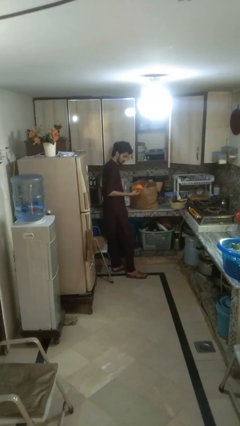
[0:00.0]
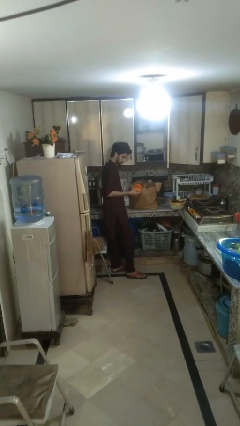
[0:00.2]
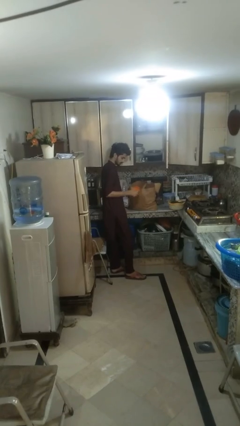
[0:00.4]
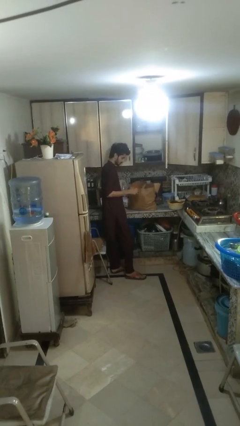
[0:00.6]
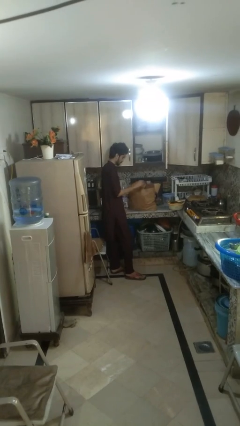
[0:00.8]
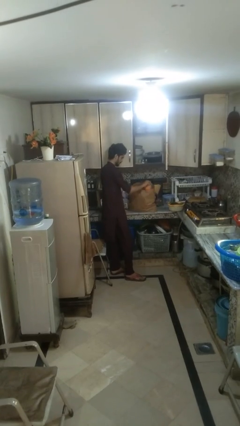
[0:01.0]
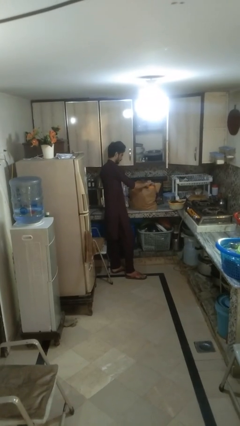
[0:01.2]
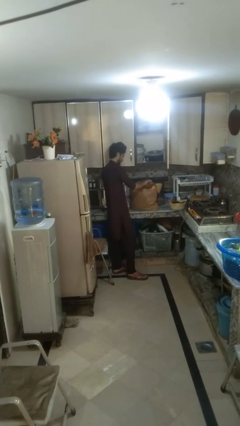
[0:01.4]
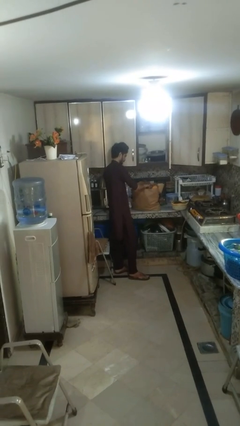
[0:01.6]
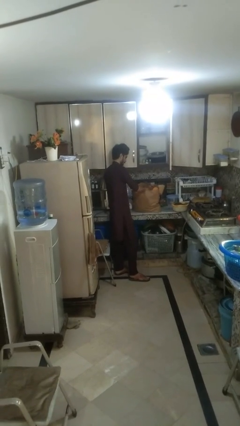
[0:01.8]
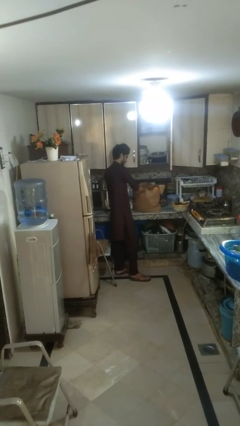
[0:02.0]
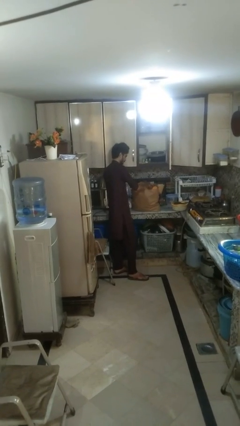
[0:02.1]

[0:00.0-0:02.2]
person puts object into bag

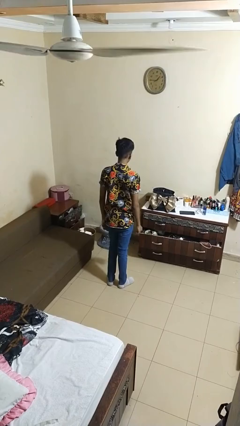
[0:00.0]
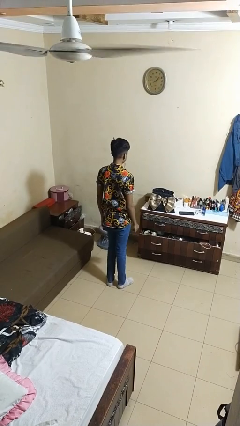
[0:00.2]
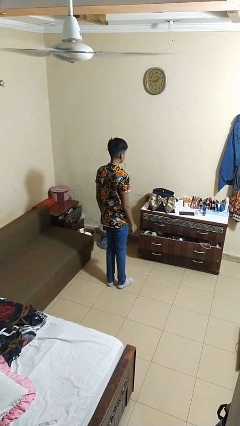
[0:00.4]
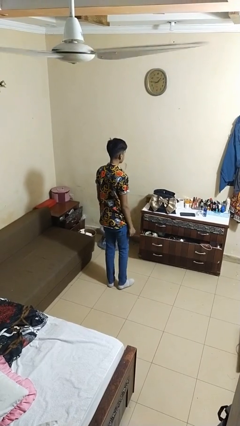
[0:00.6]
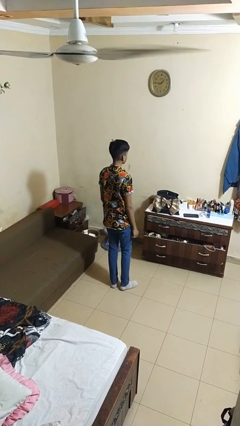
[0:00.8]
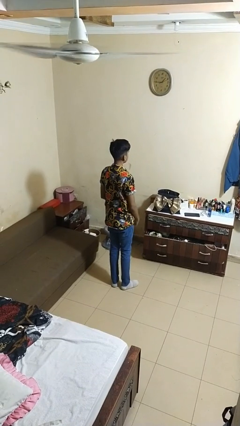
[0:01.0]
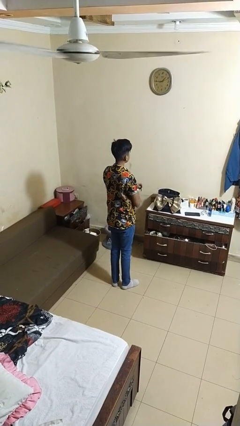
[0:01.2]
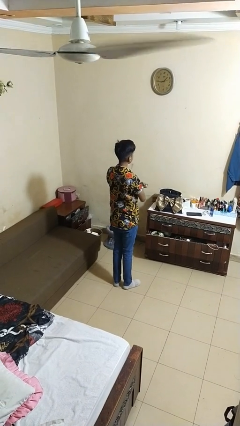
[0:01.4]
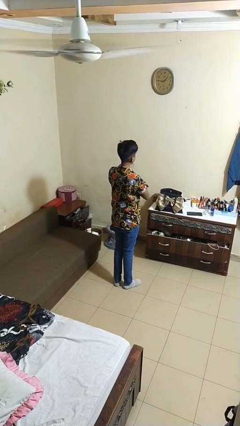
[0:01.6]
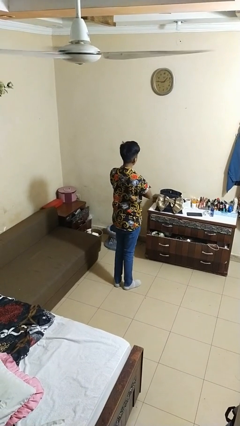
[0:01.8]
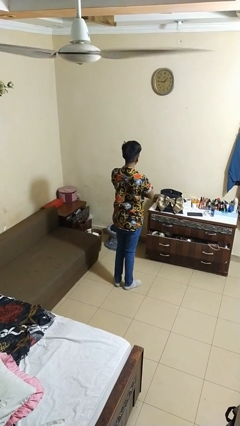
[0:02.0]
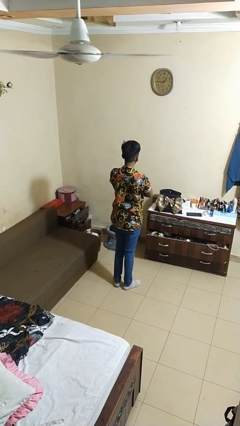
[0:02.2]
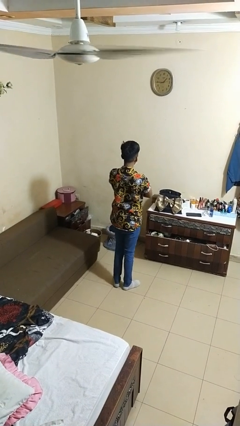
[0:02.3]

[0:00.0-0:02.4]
person crosses arms

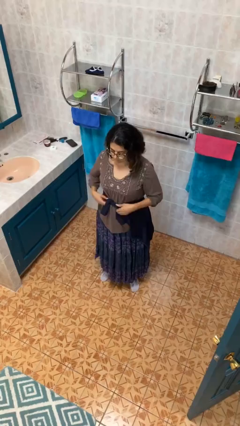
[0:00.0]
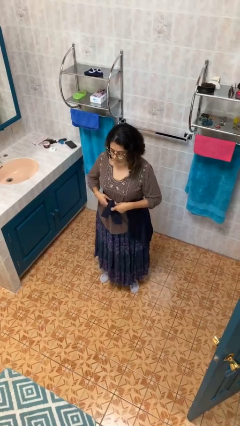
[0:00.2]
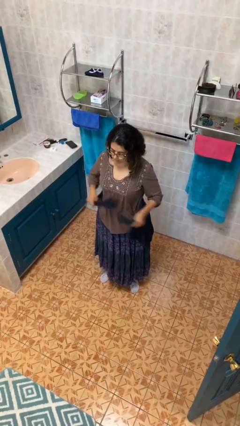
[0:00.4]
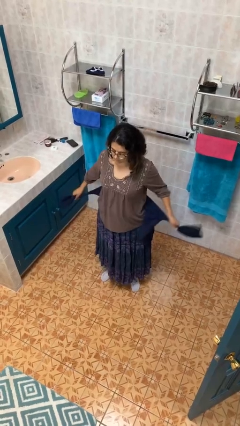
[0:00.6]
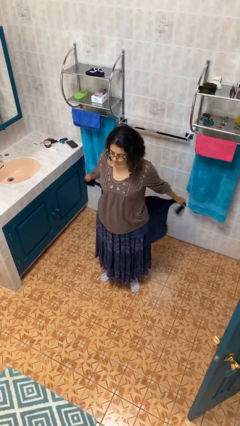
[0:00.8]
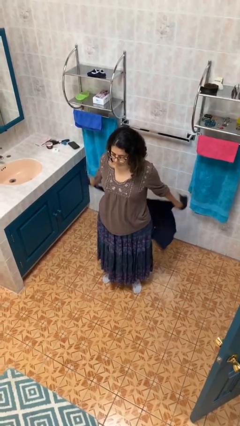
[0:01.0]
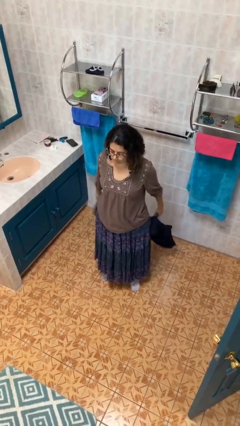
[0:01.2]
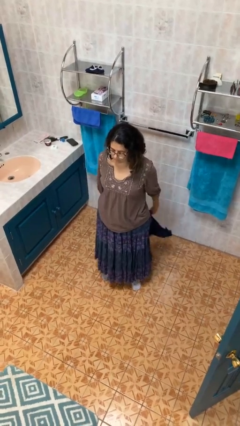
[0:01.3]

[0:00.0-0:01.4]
person unties jacket around waist

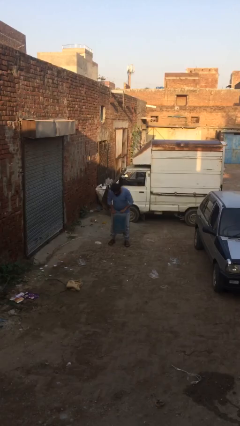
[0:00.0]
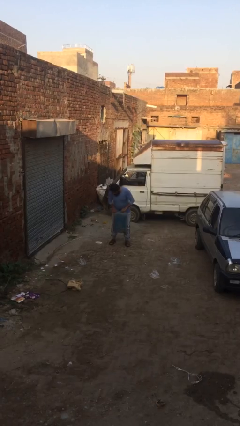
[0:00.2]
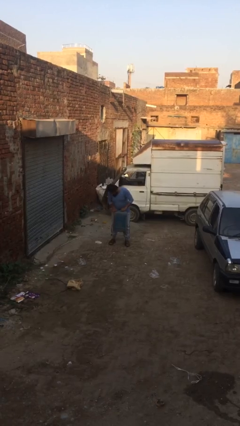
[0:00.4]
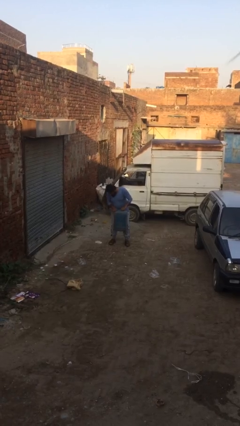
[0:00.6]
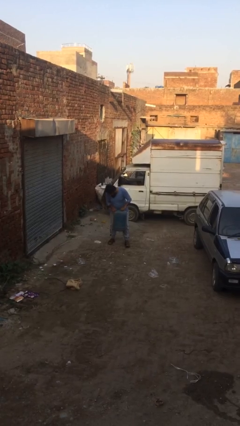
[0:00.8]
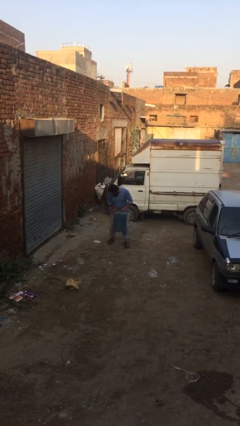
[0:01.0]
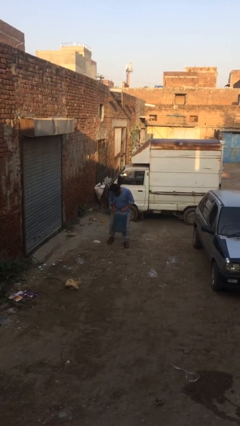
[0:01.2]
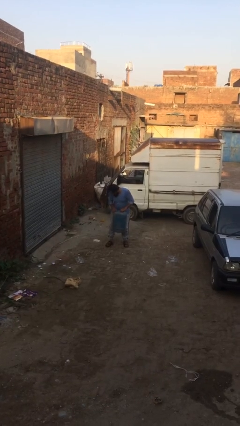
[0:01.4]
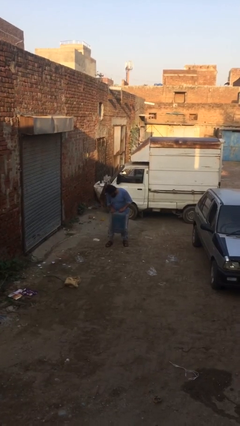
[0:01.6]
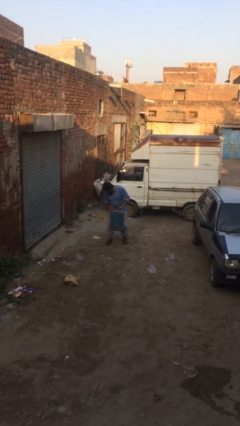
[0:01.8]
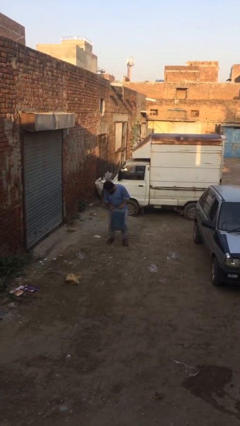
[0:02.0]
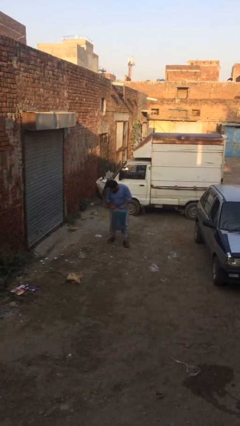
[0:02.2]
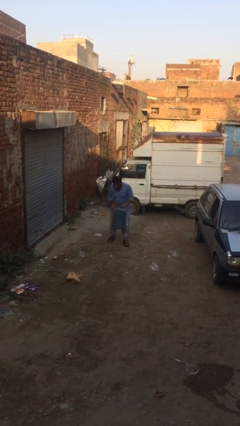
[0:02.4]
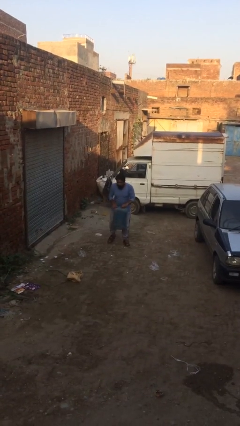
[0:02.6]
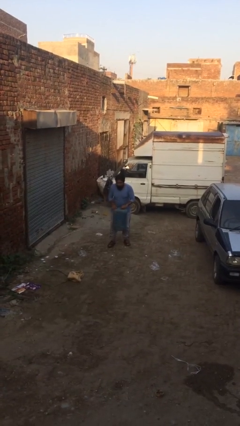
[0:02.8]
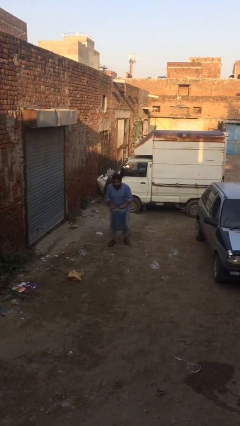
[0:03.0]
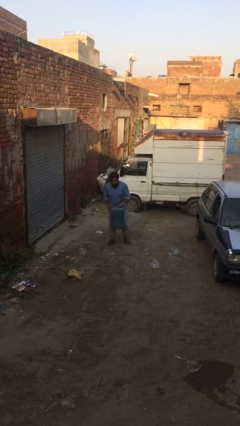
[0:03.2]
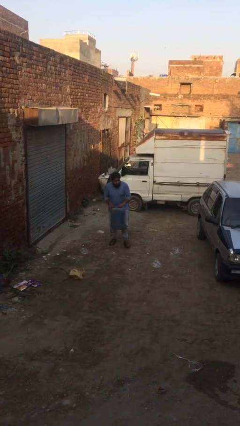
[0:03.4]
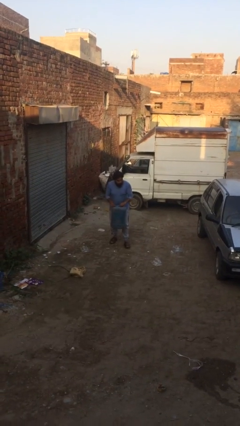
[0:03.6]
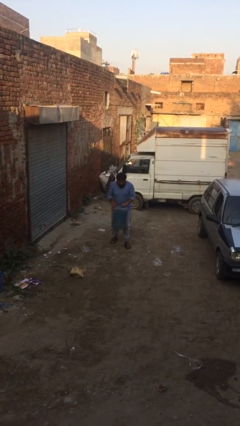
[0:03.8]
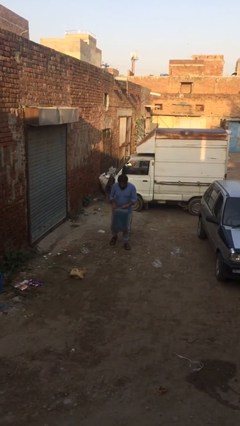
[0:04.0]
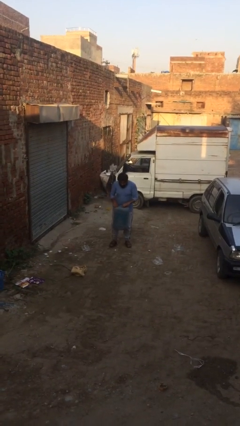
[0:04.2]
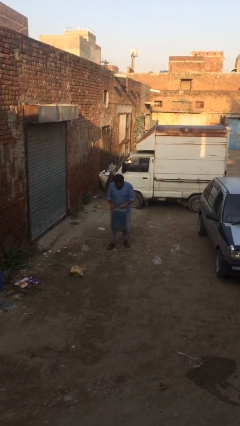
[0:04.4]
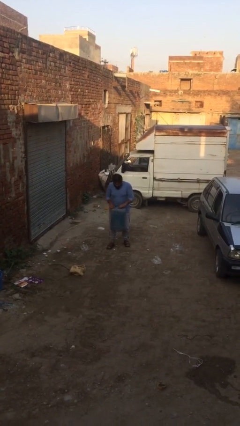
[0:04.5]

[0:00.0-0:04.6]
person carries heavy object

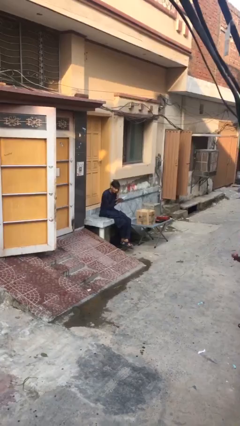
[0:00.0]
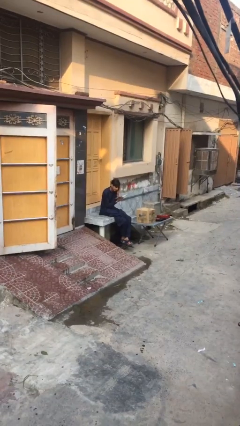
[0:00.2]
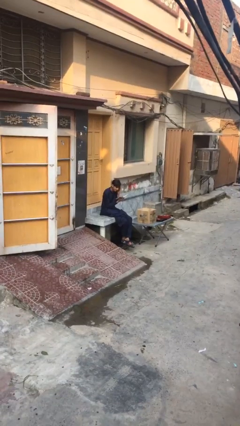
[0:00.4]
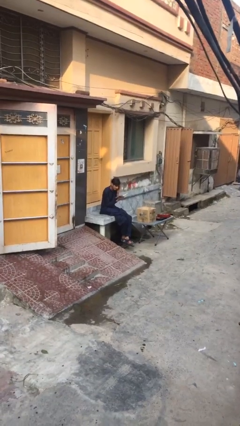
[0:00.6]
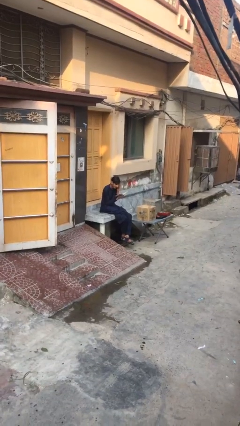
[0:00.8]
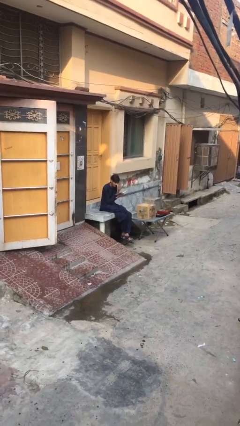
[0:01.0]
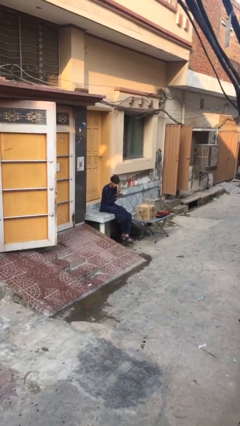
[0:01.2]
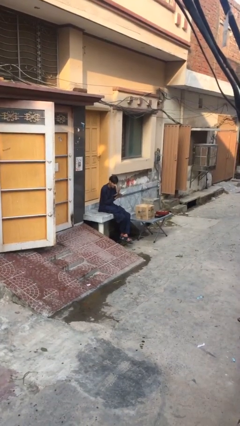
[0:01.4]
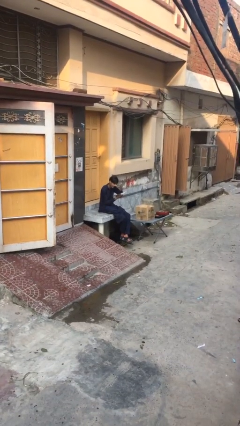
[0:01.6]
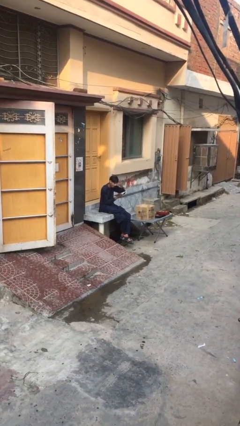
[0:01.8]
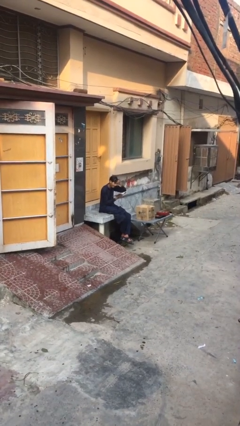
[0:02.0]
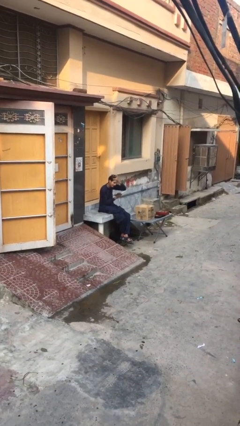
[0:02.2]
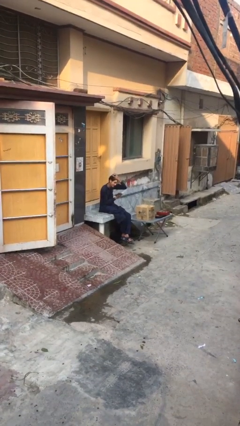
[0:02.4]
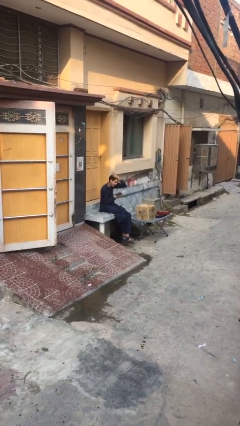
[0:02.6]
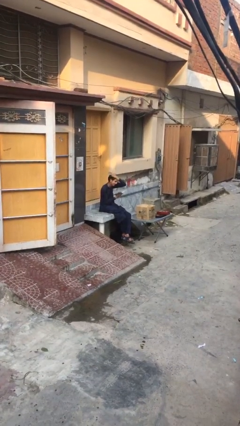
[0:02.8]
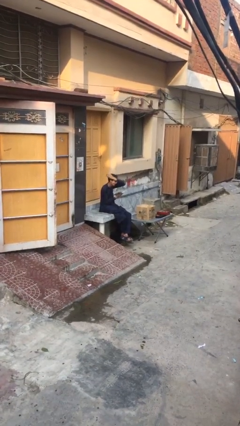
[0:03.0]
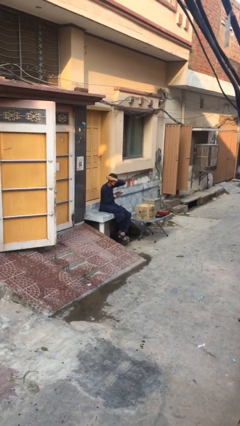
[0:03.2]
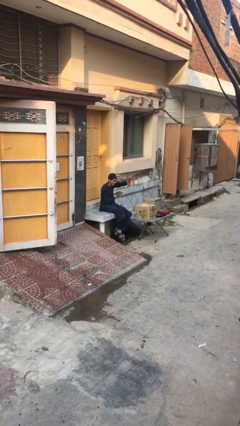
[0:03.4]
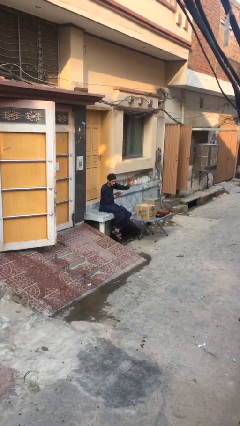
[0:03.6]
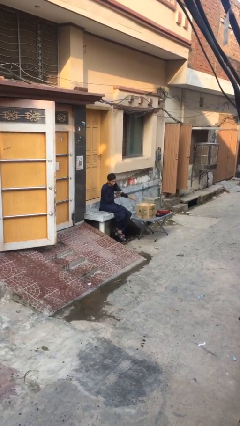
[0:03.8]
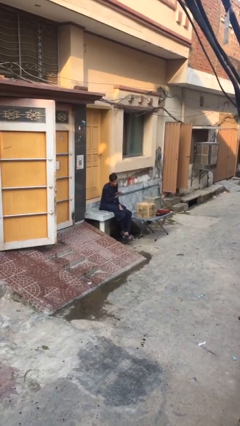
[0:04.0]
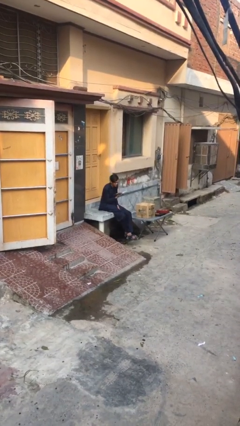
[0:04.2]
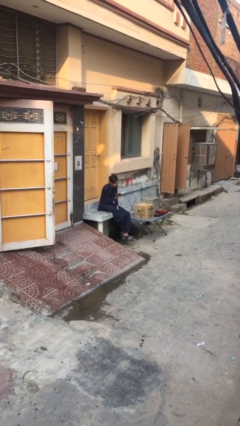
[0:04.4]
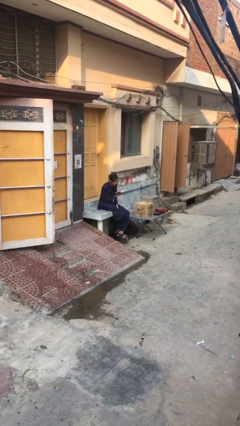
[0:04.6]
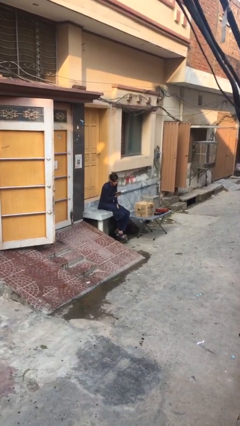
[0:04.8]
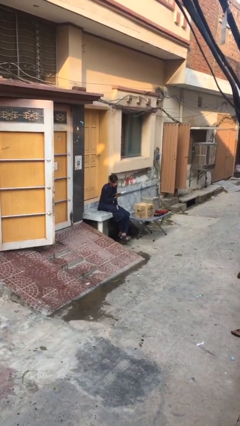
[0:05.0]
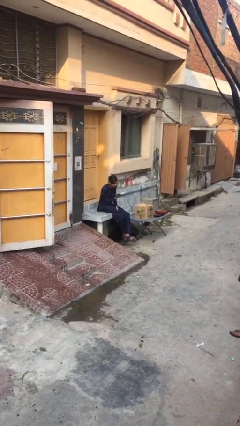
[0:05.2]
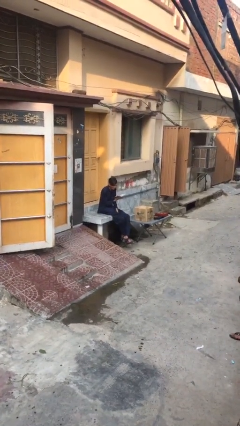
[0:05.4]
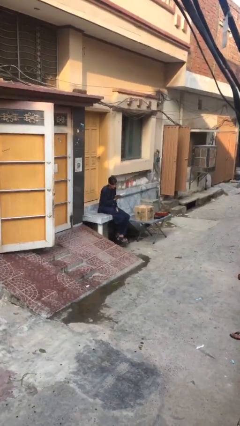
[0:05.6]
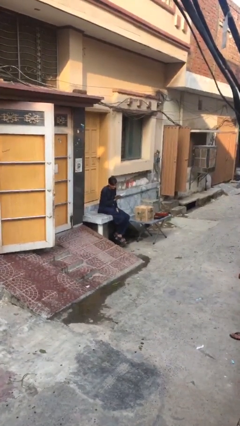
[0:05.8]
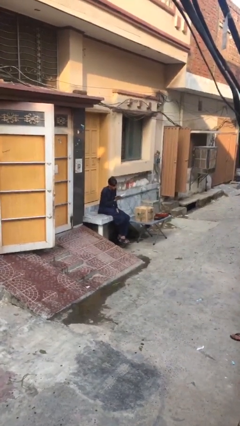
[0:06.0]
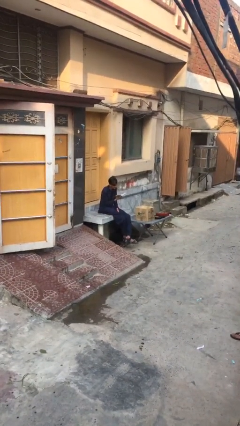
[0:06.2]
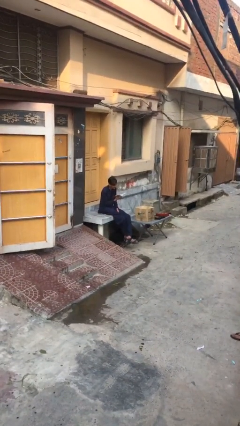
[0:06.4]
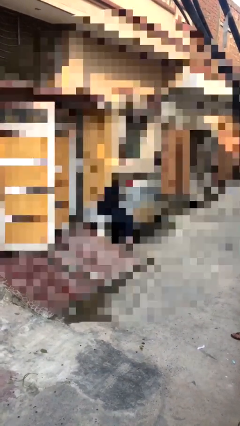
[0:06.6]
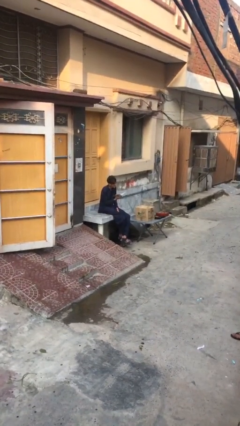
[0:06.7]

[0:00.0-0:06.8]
person reads document
